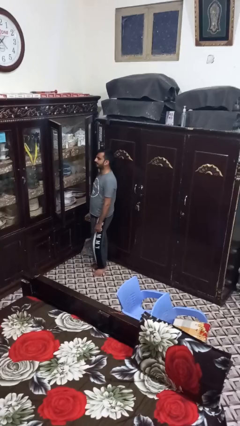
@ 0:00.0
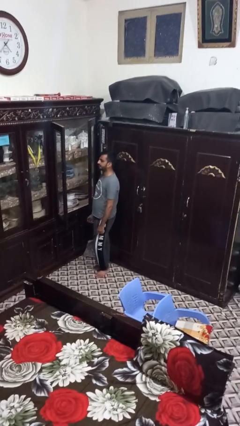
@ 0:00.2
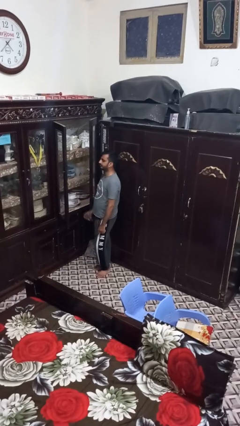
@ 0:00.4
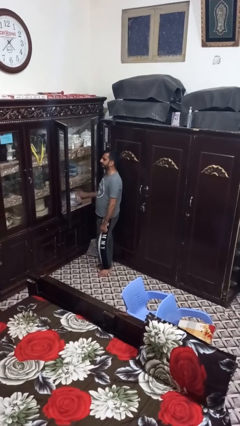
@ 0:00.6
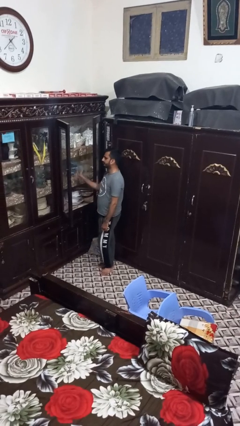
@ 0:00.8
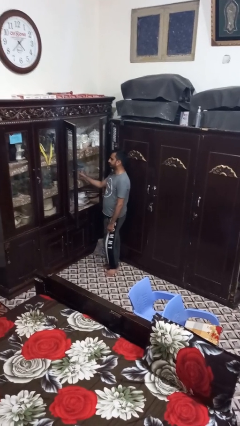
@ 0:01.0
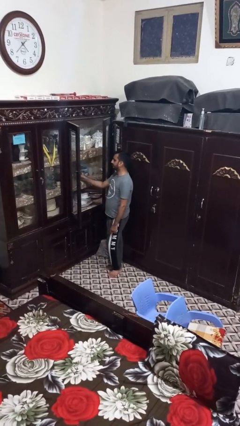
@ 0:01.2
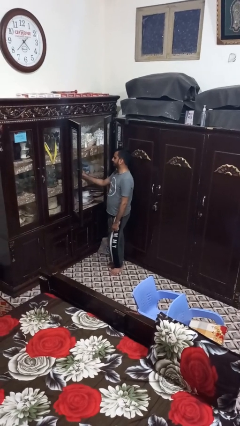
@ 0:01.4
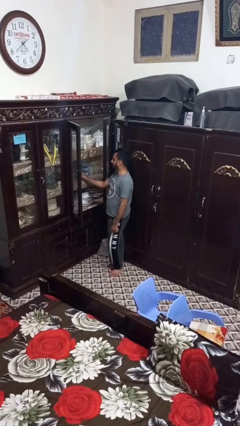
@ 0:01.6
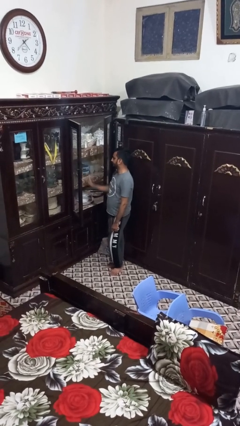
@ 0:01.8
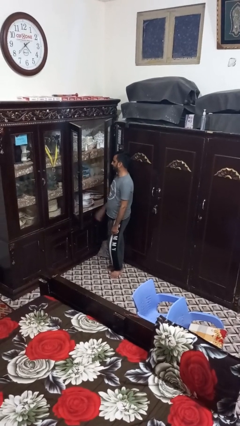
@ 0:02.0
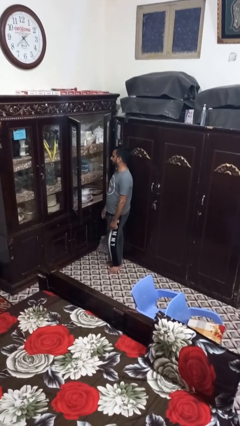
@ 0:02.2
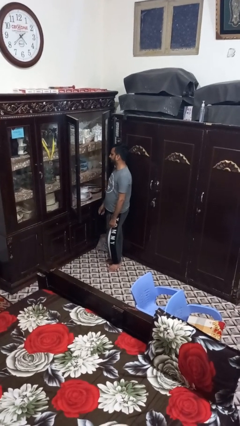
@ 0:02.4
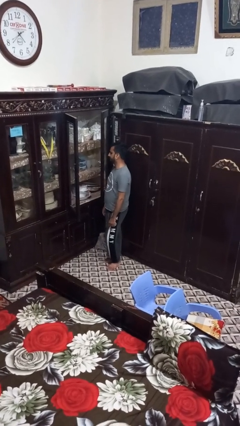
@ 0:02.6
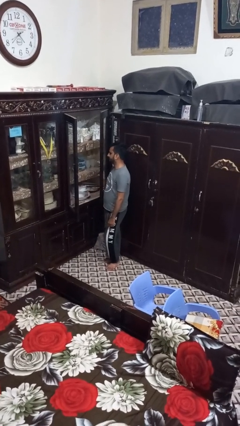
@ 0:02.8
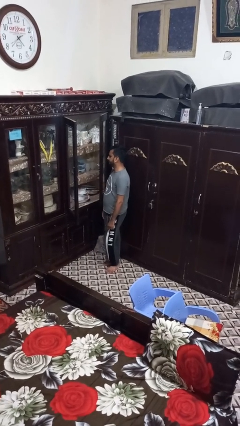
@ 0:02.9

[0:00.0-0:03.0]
person puts down object on countertop

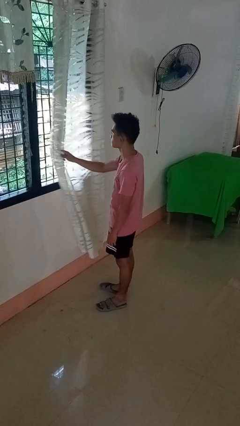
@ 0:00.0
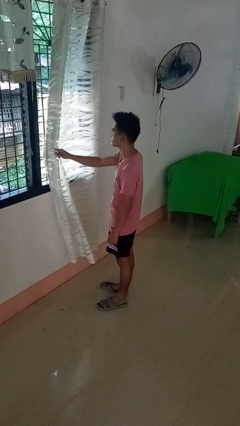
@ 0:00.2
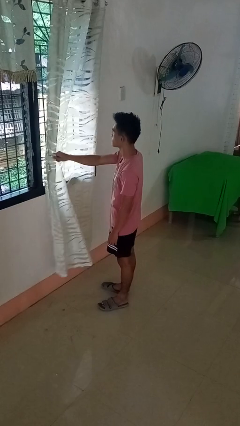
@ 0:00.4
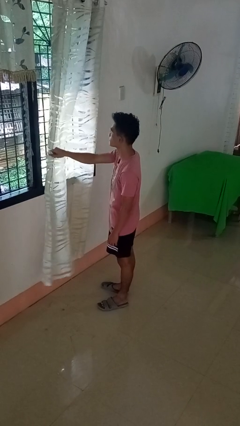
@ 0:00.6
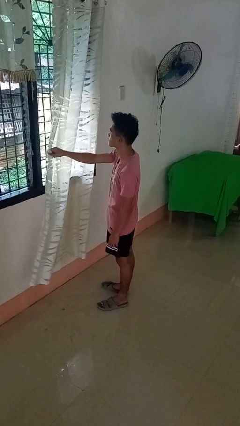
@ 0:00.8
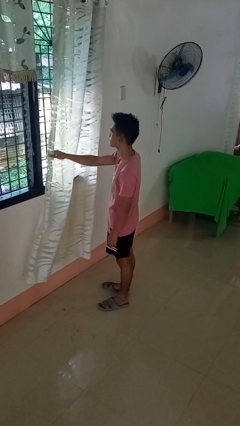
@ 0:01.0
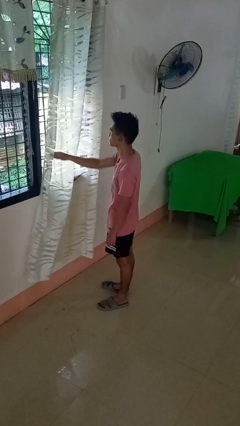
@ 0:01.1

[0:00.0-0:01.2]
person closes curtains

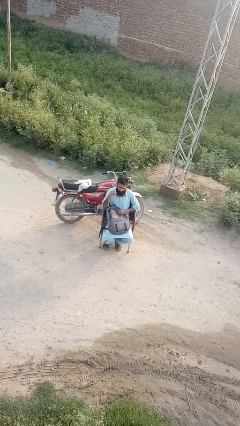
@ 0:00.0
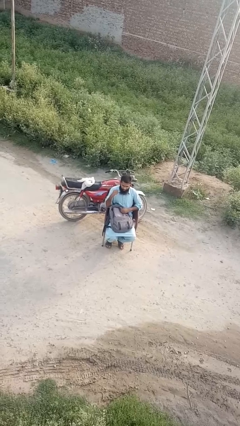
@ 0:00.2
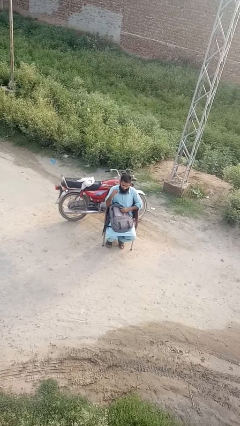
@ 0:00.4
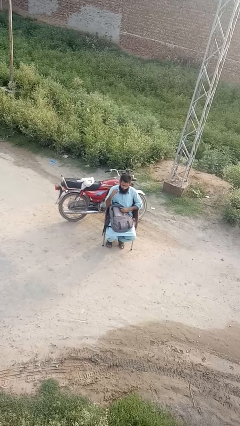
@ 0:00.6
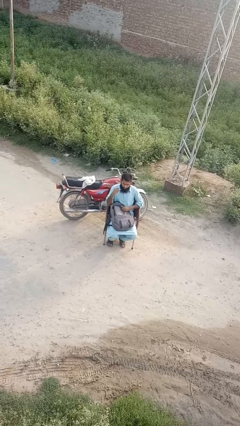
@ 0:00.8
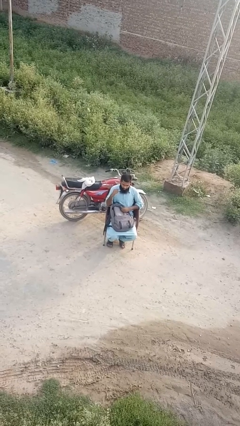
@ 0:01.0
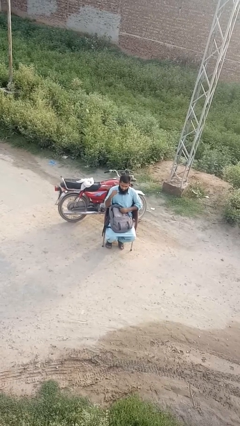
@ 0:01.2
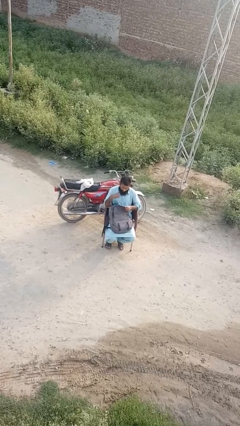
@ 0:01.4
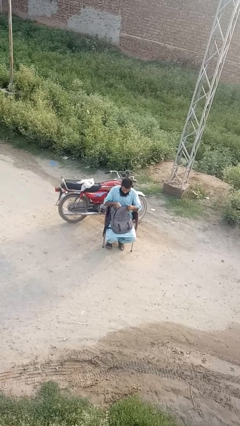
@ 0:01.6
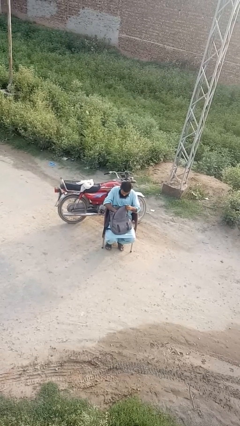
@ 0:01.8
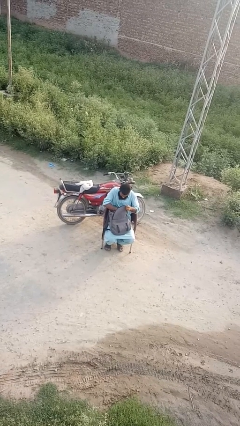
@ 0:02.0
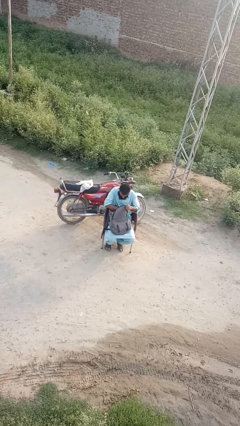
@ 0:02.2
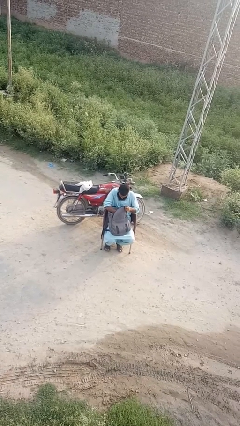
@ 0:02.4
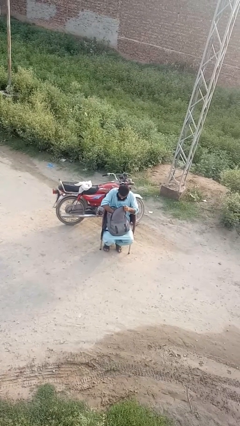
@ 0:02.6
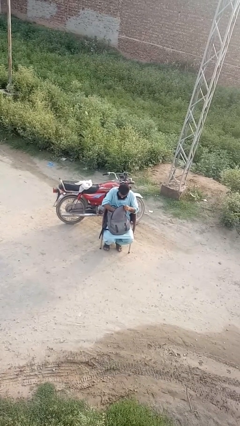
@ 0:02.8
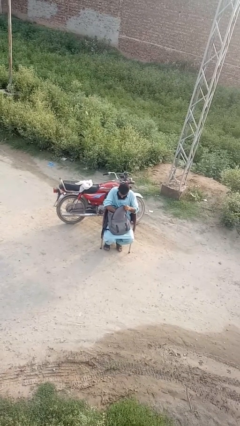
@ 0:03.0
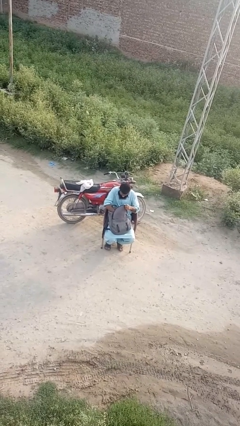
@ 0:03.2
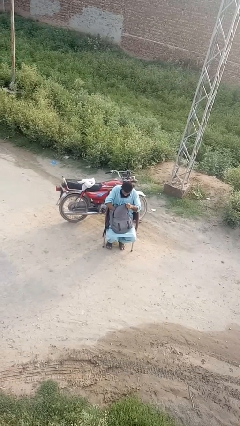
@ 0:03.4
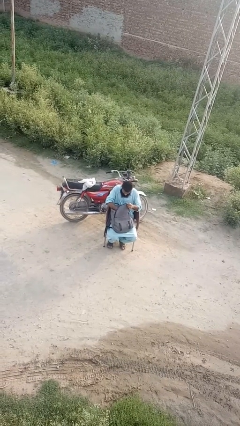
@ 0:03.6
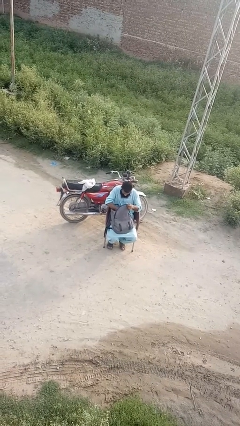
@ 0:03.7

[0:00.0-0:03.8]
person searches in backpack

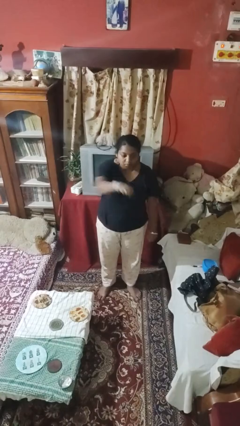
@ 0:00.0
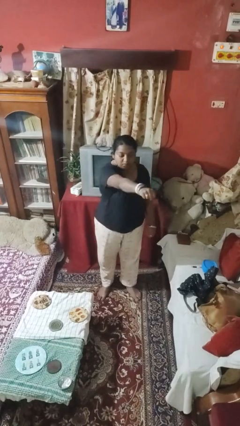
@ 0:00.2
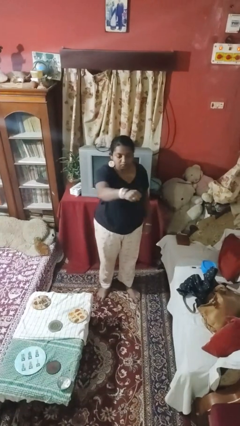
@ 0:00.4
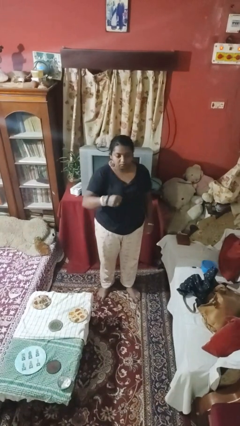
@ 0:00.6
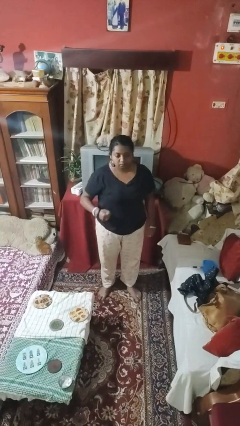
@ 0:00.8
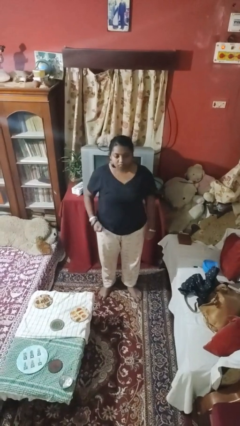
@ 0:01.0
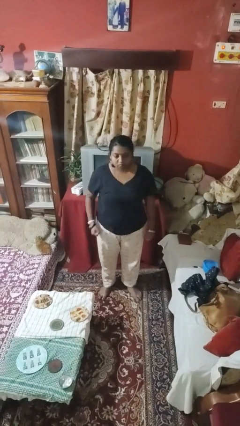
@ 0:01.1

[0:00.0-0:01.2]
person punches

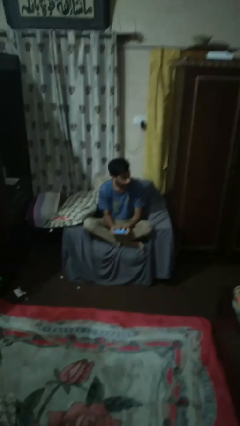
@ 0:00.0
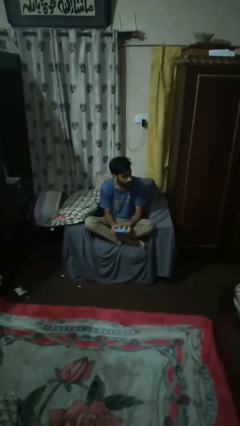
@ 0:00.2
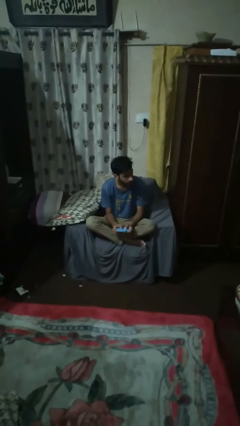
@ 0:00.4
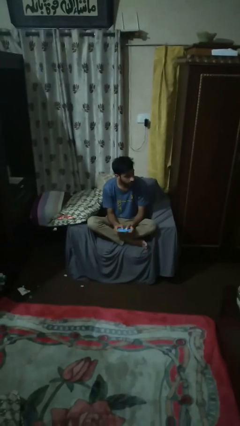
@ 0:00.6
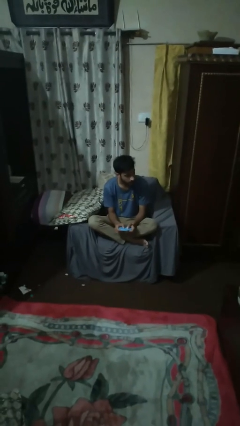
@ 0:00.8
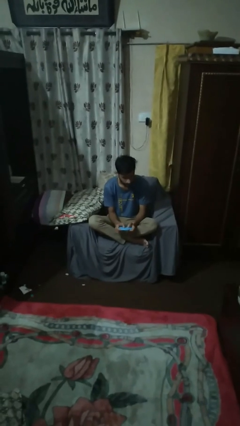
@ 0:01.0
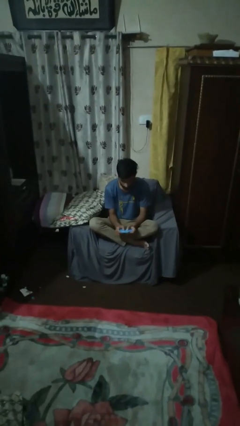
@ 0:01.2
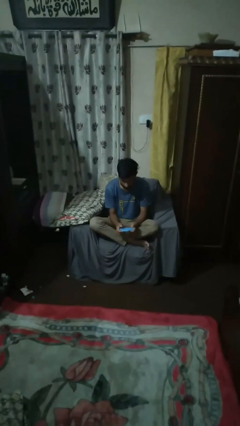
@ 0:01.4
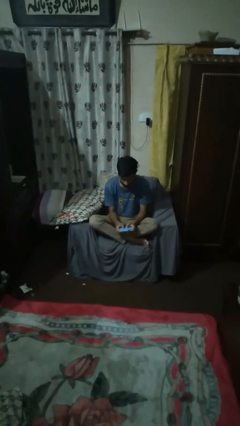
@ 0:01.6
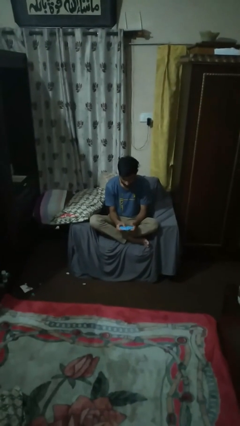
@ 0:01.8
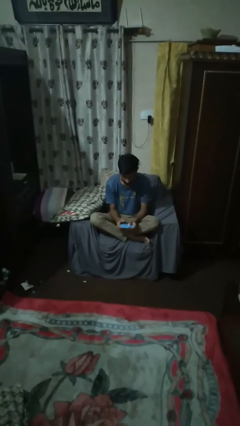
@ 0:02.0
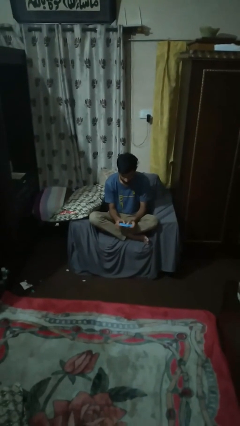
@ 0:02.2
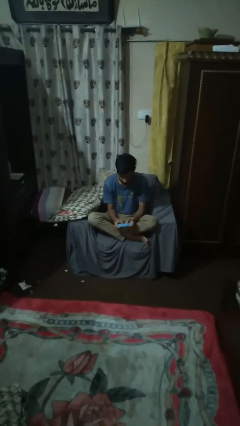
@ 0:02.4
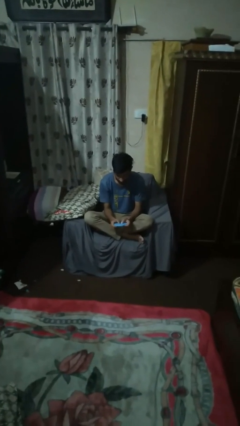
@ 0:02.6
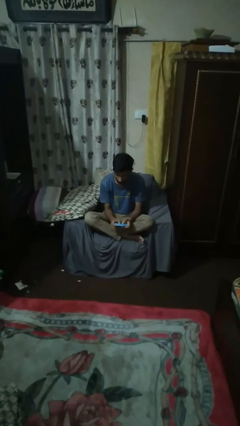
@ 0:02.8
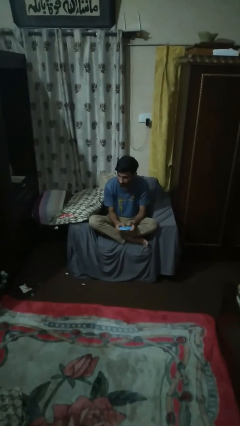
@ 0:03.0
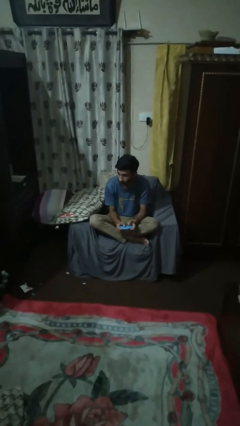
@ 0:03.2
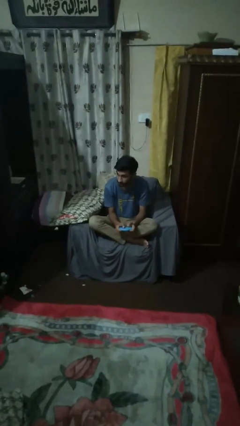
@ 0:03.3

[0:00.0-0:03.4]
person interacts with handheld game

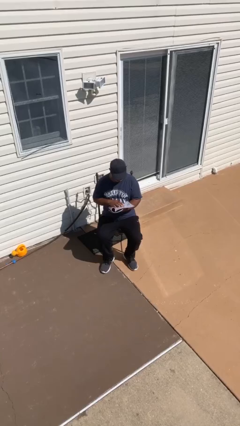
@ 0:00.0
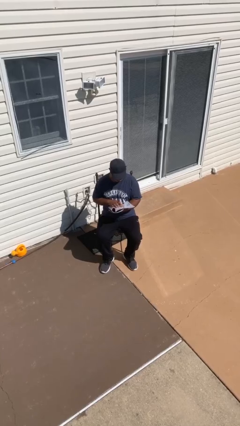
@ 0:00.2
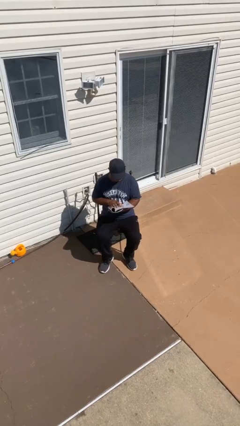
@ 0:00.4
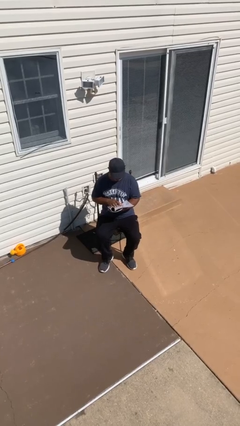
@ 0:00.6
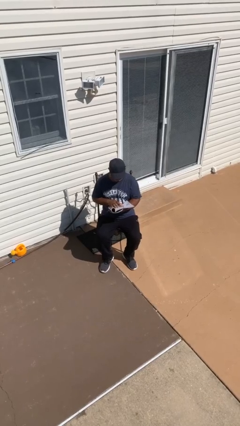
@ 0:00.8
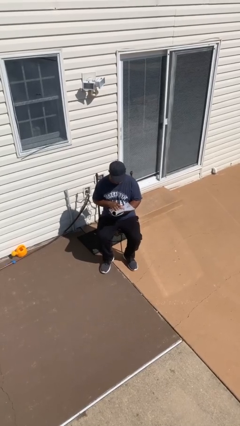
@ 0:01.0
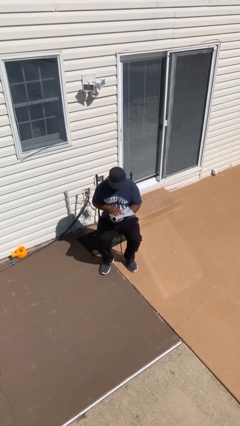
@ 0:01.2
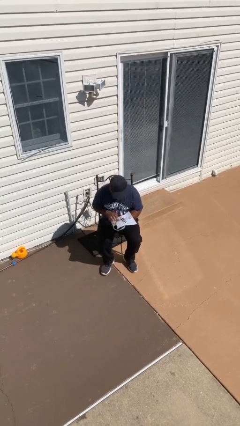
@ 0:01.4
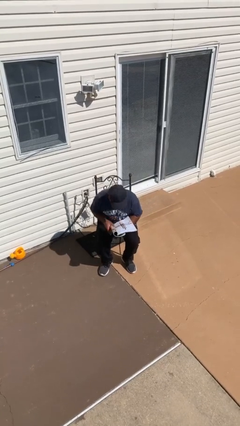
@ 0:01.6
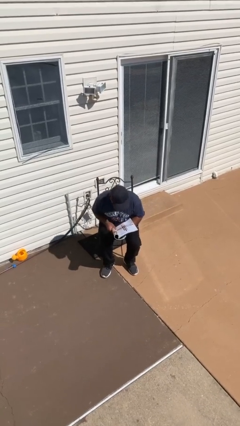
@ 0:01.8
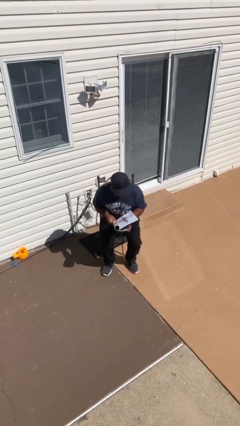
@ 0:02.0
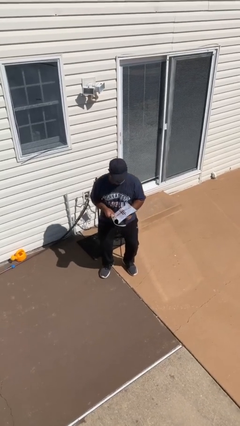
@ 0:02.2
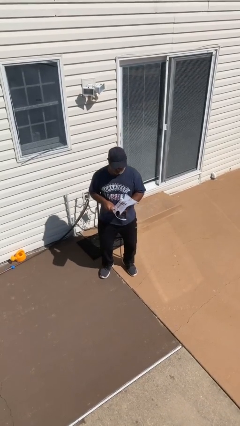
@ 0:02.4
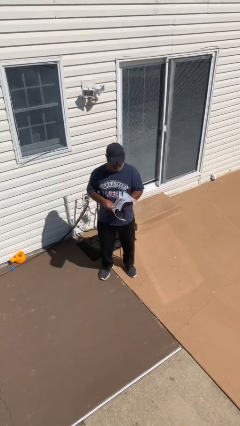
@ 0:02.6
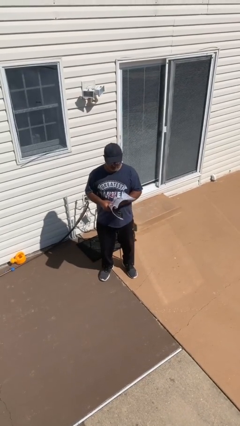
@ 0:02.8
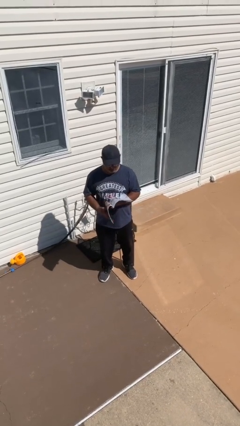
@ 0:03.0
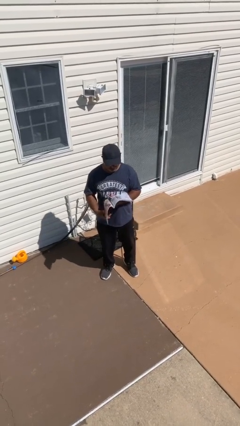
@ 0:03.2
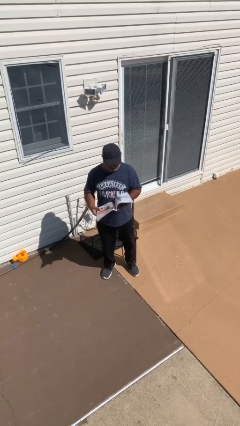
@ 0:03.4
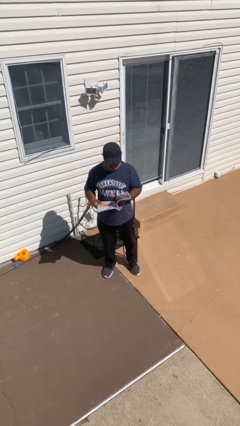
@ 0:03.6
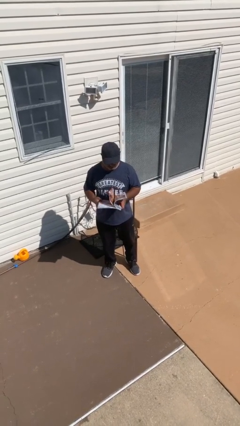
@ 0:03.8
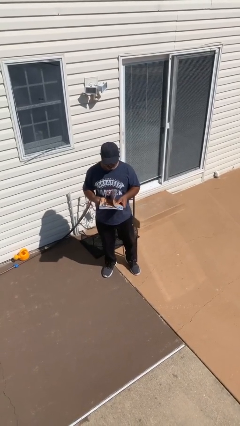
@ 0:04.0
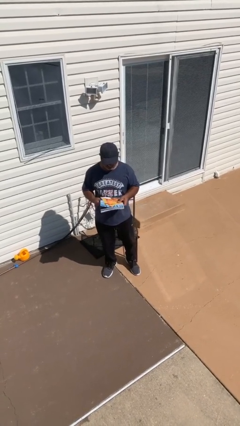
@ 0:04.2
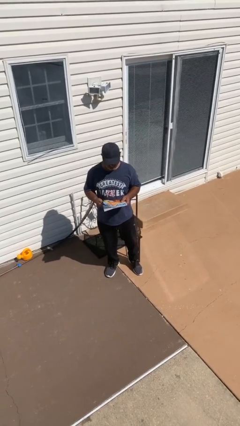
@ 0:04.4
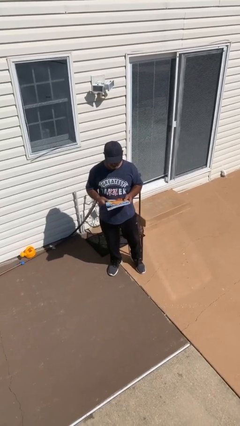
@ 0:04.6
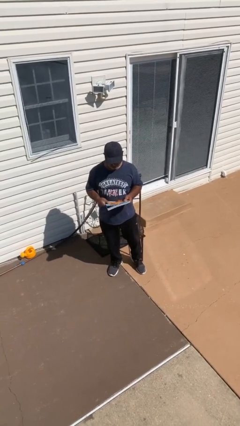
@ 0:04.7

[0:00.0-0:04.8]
person stands up
